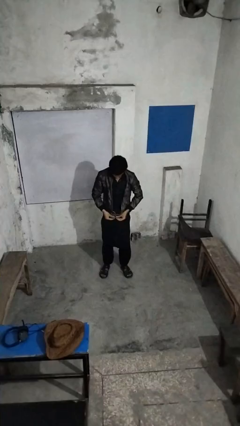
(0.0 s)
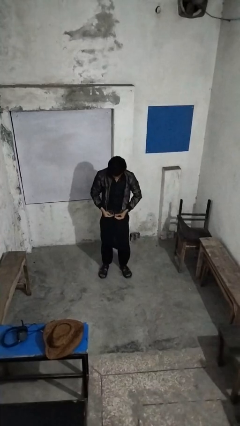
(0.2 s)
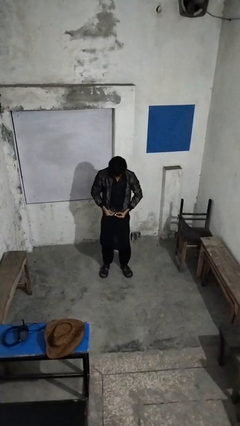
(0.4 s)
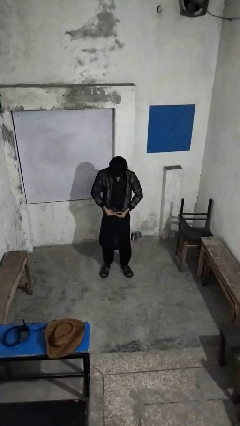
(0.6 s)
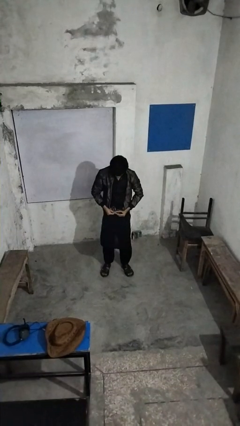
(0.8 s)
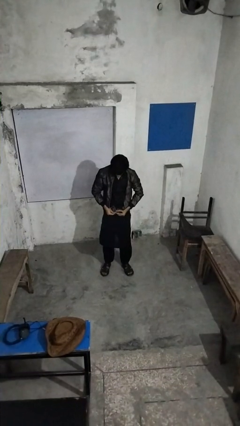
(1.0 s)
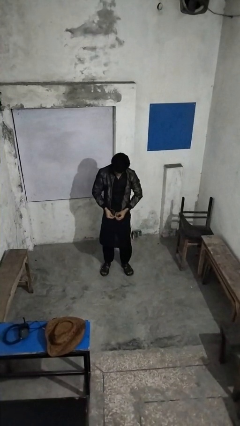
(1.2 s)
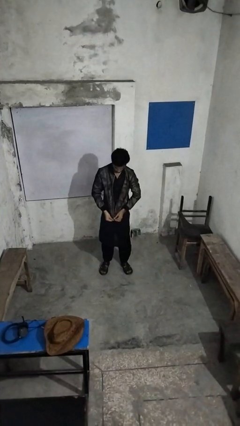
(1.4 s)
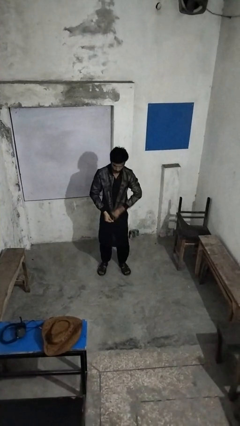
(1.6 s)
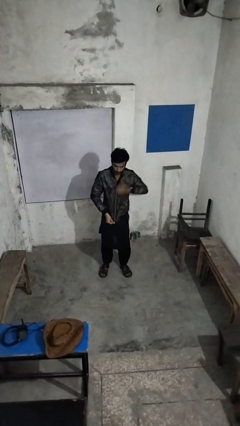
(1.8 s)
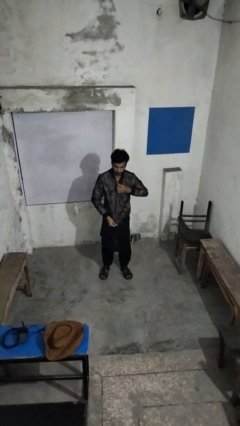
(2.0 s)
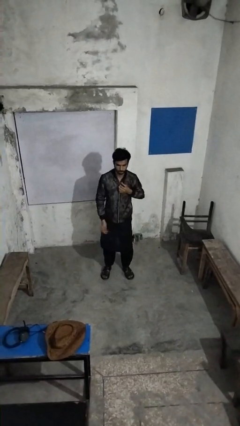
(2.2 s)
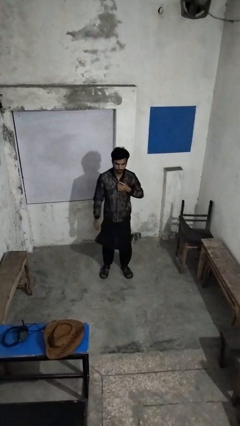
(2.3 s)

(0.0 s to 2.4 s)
person zips up jacket

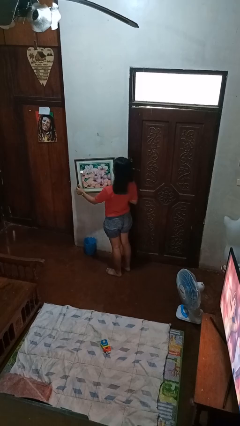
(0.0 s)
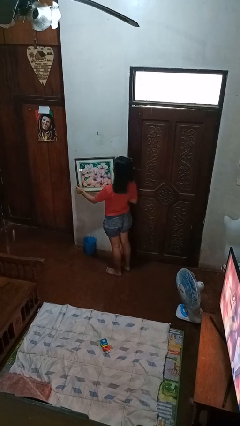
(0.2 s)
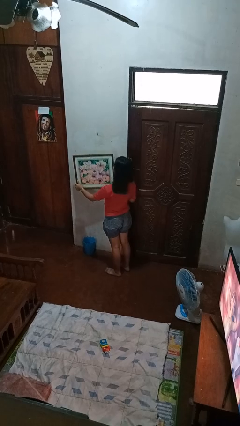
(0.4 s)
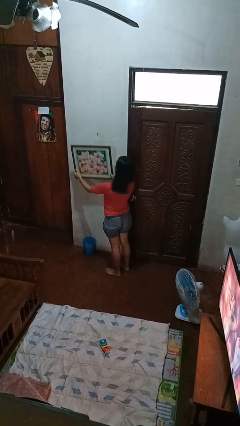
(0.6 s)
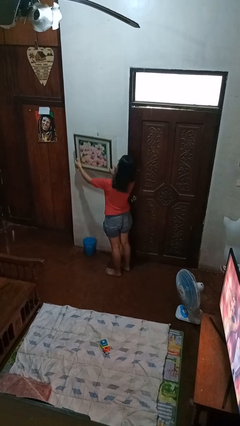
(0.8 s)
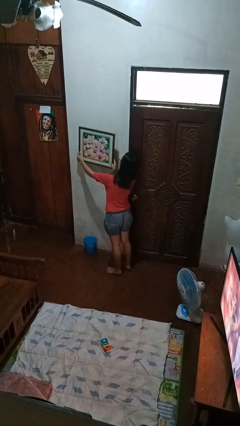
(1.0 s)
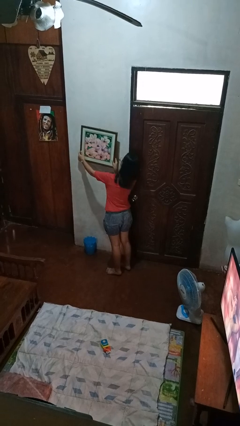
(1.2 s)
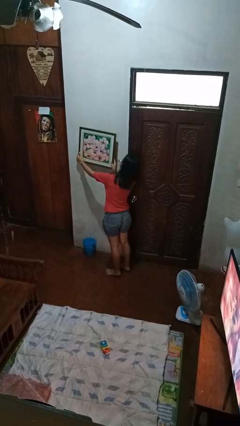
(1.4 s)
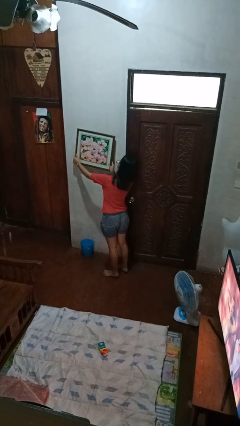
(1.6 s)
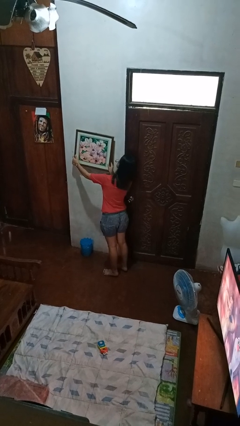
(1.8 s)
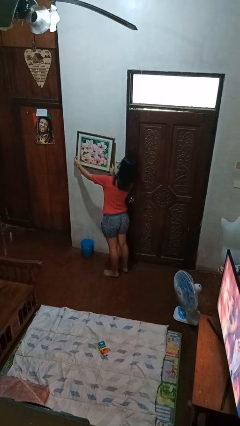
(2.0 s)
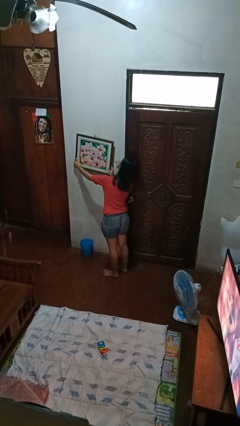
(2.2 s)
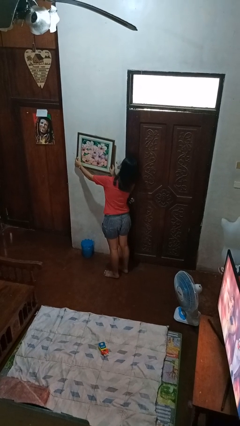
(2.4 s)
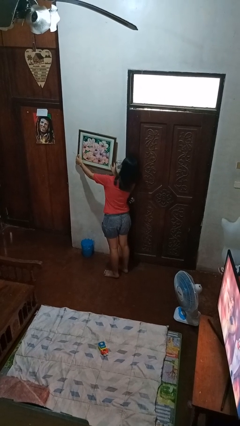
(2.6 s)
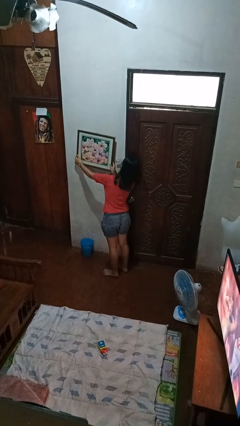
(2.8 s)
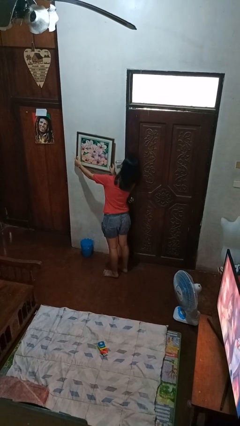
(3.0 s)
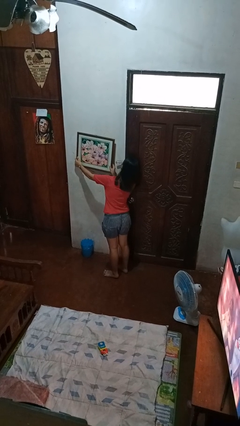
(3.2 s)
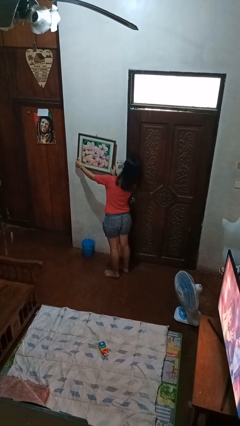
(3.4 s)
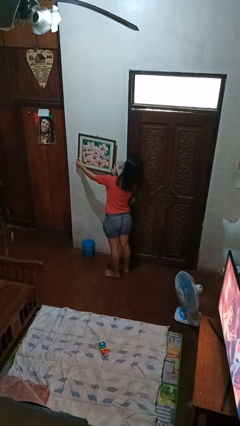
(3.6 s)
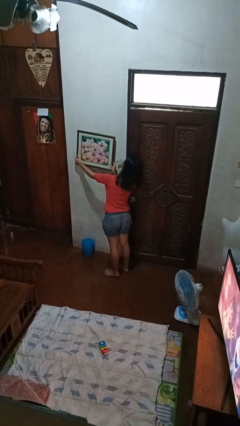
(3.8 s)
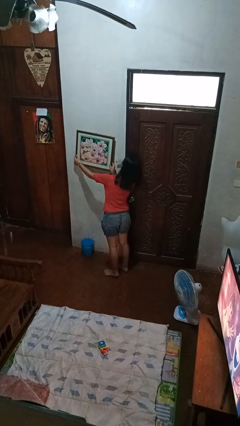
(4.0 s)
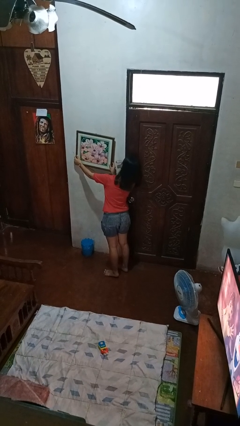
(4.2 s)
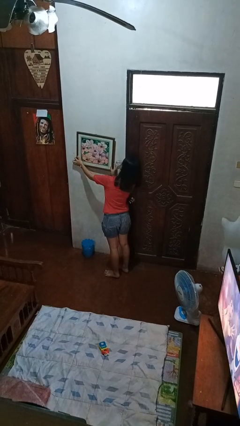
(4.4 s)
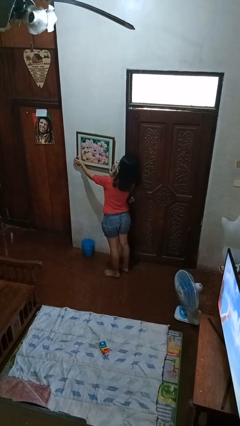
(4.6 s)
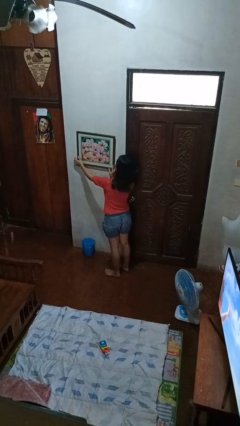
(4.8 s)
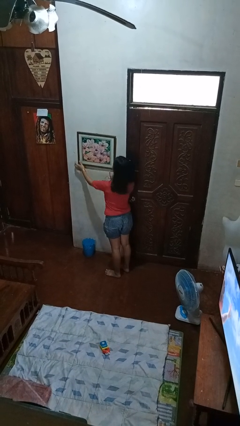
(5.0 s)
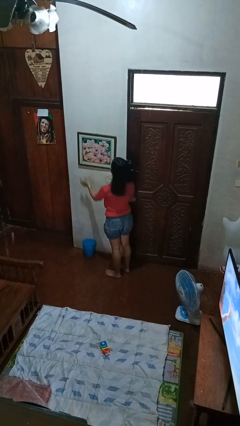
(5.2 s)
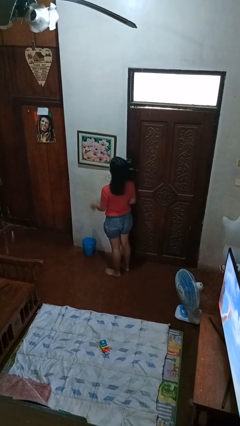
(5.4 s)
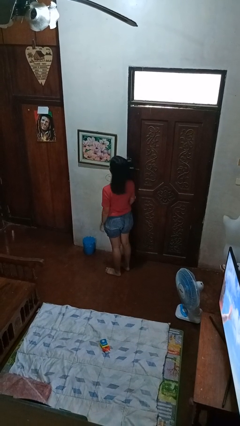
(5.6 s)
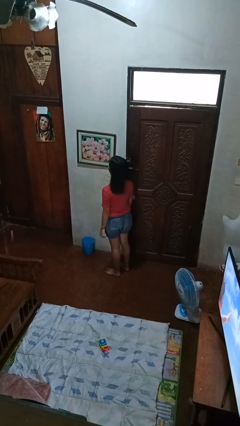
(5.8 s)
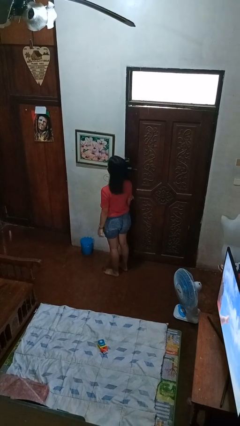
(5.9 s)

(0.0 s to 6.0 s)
person puts up picture frame

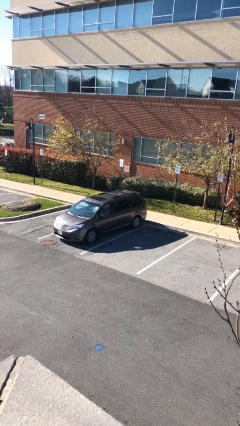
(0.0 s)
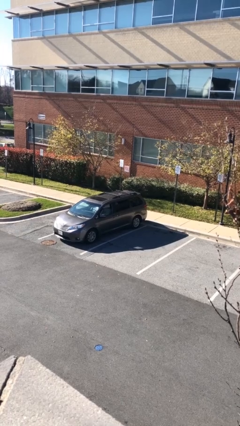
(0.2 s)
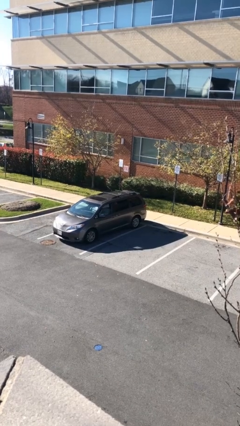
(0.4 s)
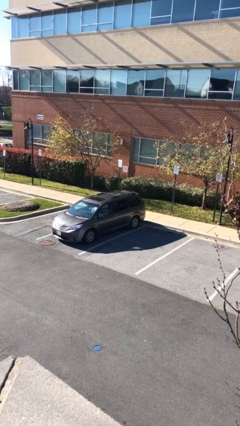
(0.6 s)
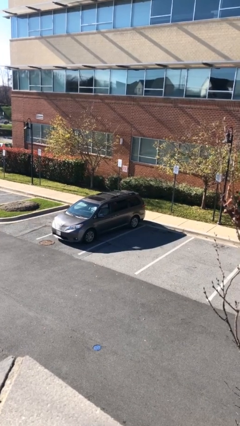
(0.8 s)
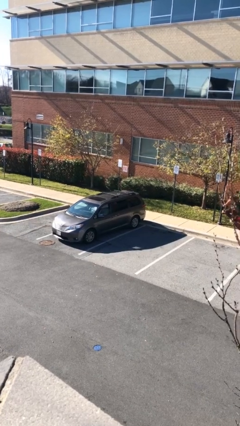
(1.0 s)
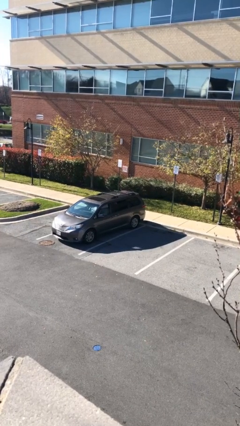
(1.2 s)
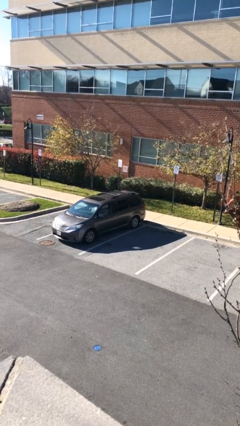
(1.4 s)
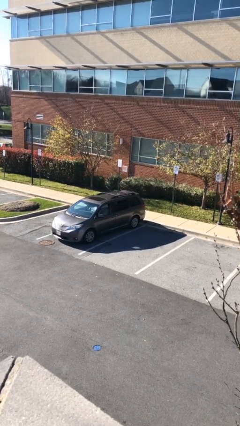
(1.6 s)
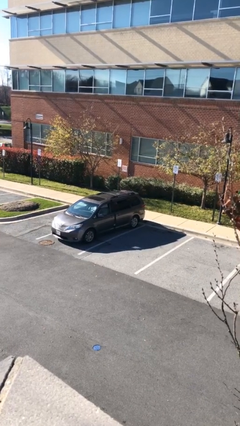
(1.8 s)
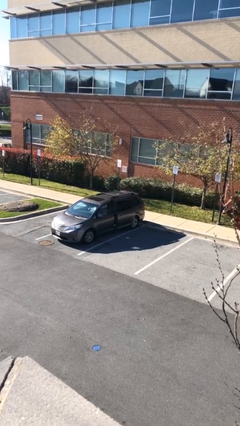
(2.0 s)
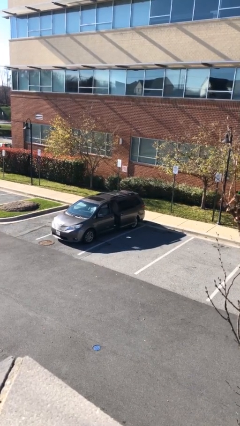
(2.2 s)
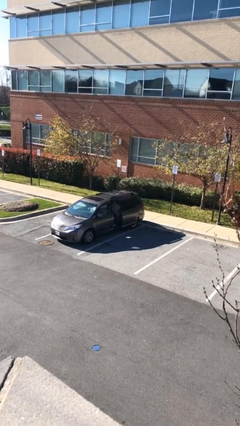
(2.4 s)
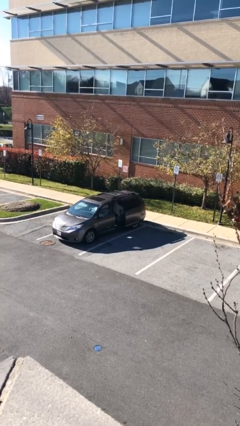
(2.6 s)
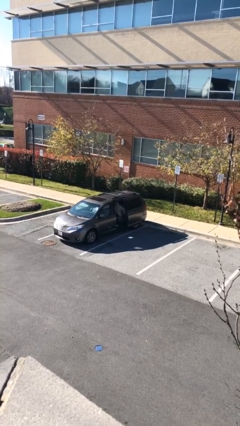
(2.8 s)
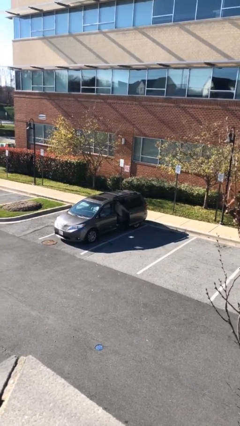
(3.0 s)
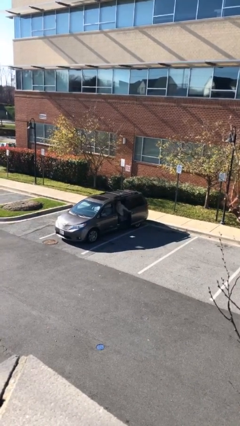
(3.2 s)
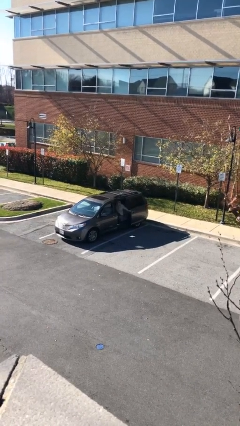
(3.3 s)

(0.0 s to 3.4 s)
person opens car door

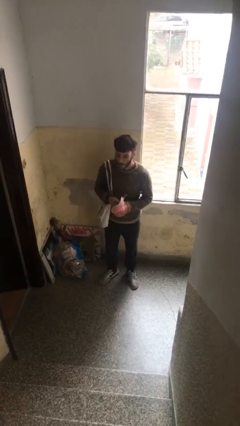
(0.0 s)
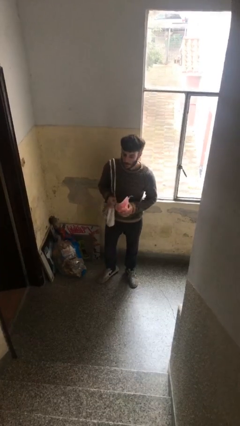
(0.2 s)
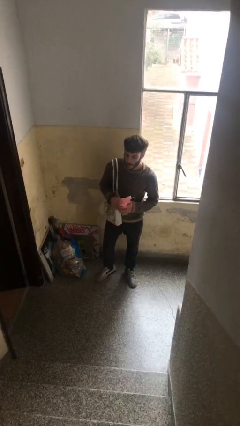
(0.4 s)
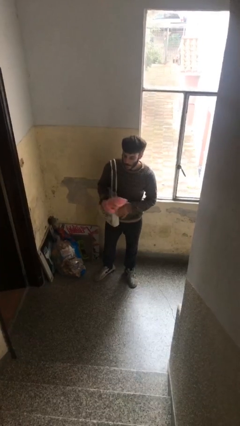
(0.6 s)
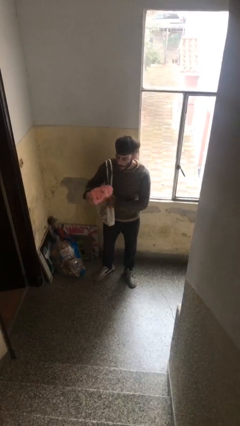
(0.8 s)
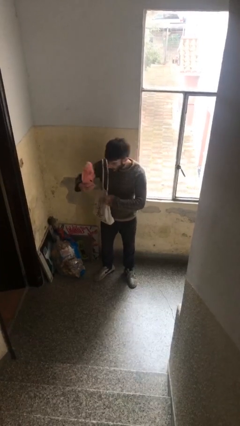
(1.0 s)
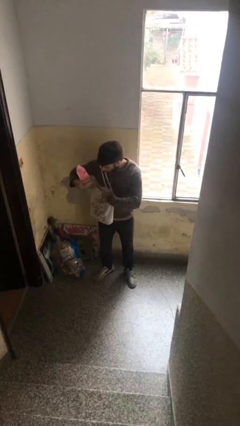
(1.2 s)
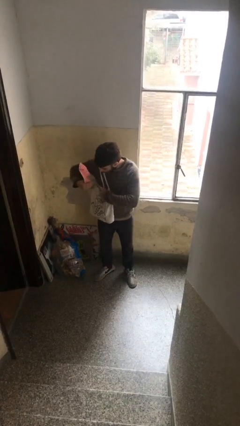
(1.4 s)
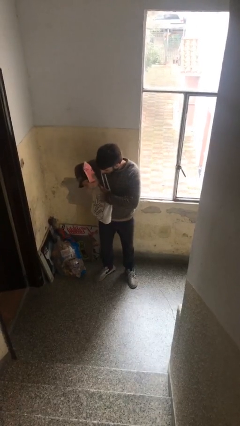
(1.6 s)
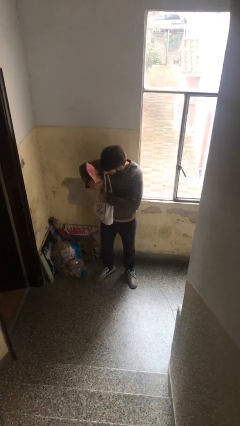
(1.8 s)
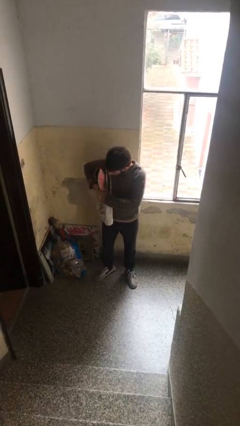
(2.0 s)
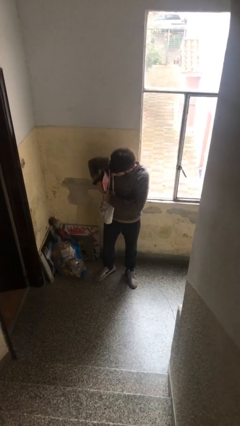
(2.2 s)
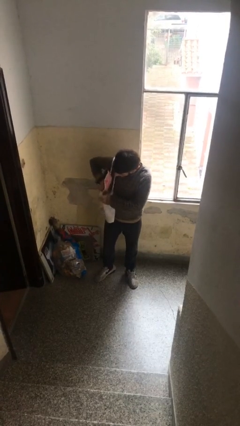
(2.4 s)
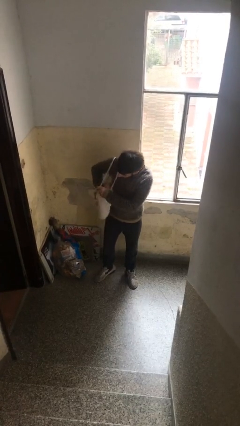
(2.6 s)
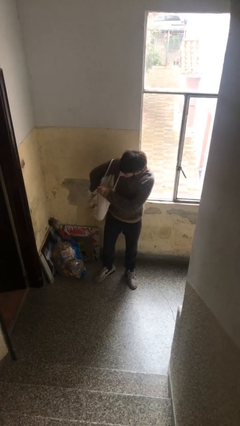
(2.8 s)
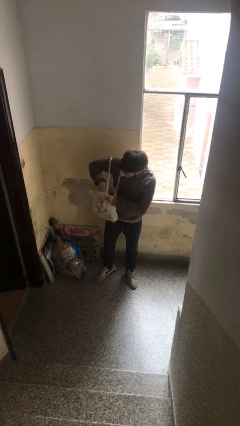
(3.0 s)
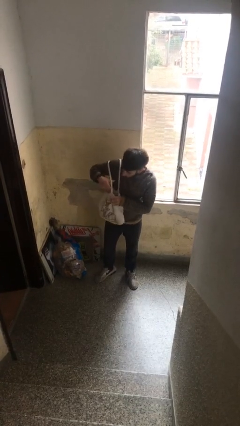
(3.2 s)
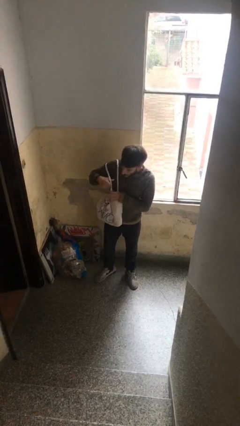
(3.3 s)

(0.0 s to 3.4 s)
person puts object into purse

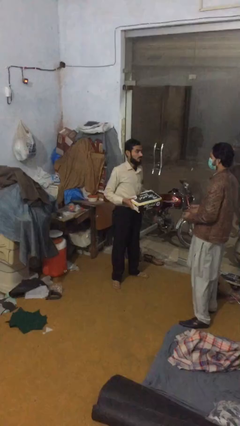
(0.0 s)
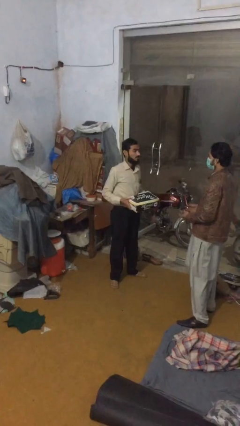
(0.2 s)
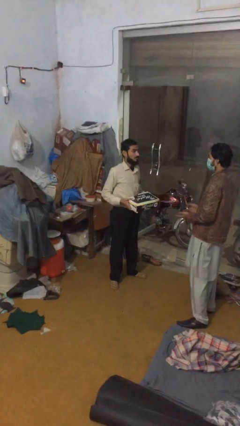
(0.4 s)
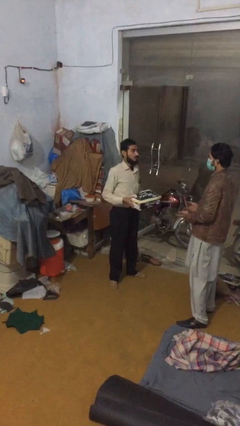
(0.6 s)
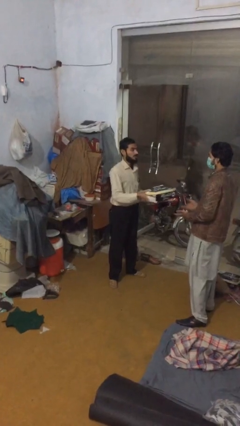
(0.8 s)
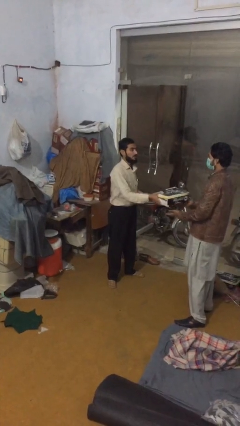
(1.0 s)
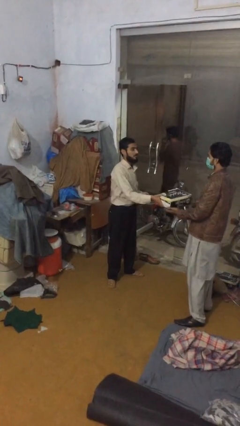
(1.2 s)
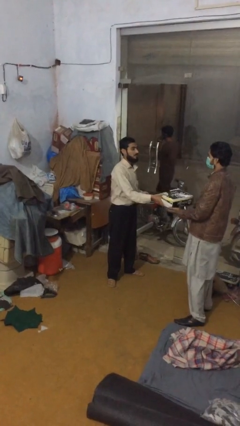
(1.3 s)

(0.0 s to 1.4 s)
person transfers object to person

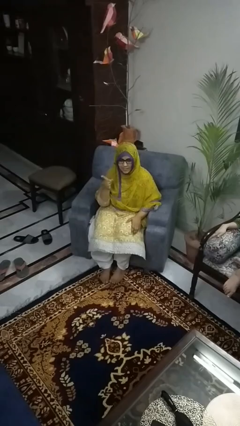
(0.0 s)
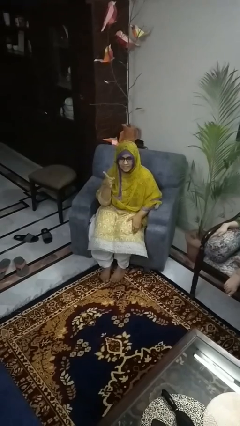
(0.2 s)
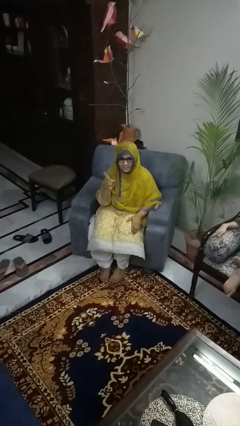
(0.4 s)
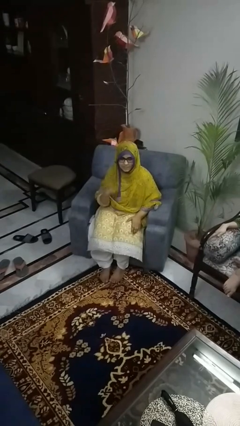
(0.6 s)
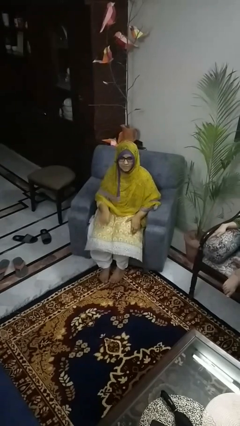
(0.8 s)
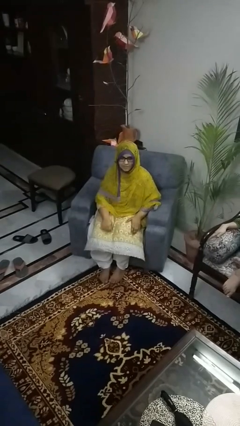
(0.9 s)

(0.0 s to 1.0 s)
person gestures number one
